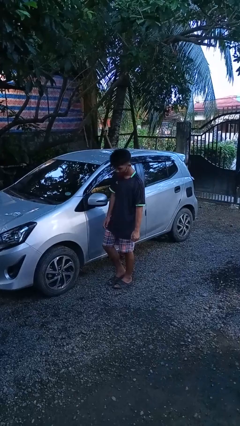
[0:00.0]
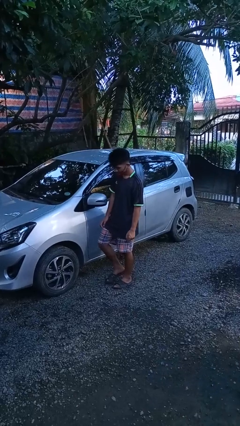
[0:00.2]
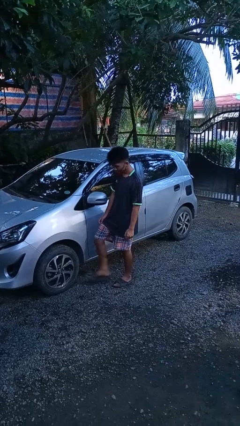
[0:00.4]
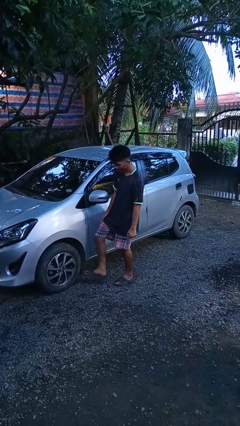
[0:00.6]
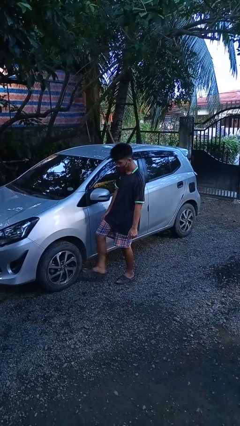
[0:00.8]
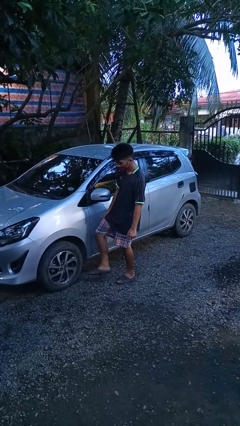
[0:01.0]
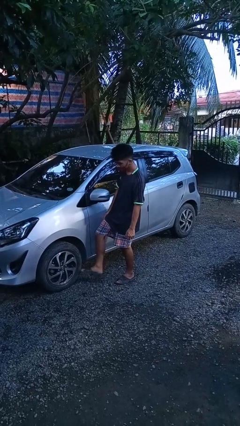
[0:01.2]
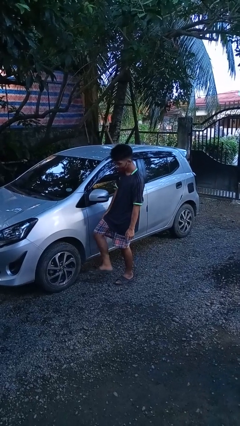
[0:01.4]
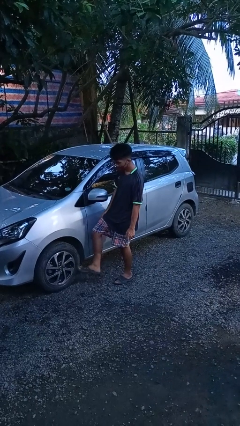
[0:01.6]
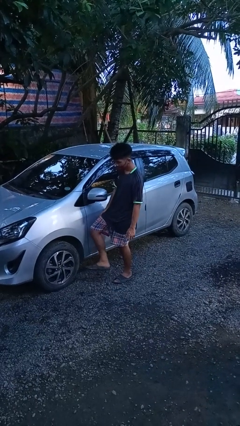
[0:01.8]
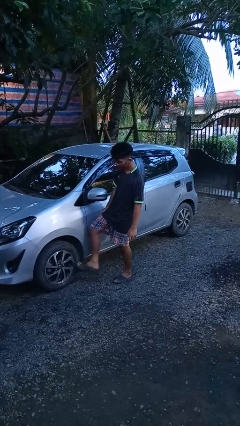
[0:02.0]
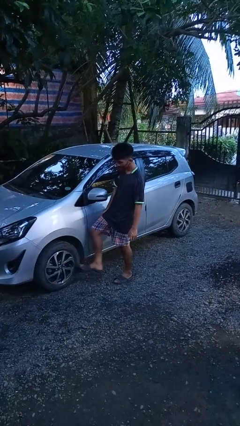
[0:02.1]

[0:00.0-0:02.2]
person kicks car tires

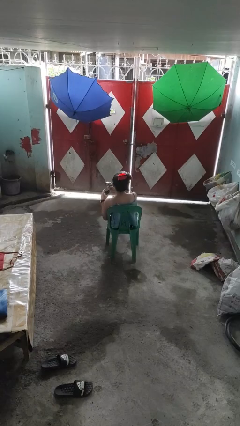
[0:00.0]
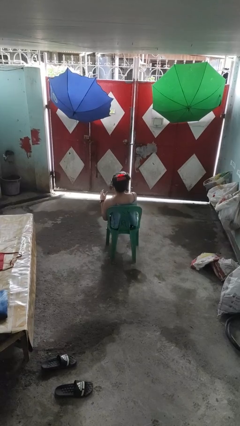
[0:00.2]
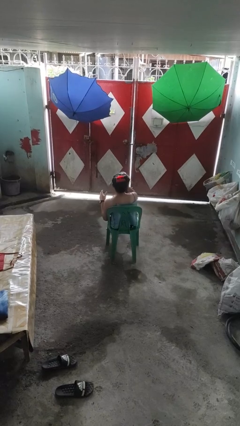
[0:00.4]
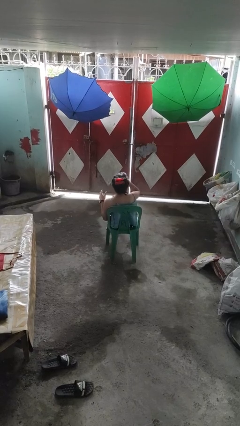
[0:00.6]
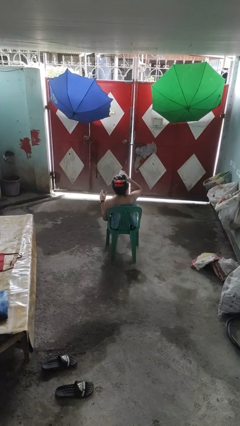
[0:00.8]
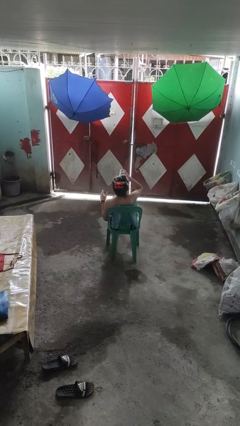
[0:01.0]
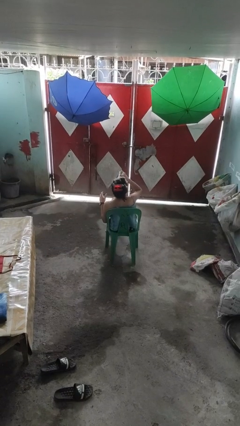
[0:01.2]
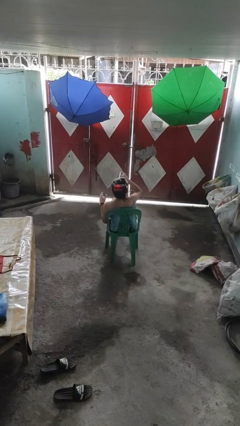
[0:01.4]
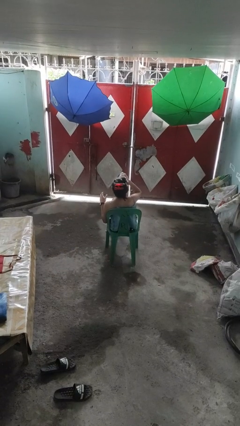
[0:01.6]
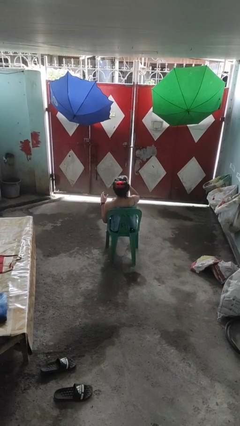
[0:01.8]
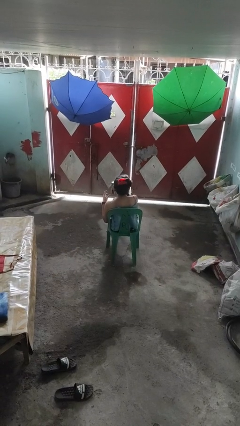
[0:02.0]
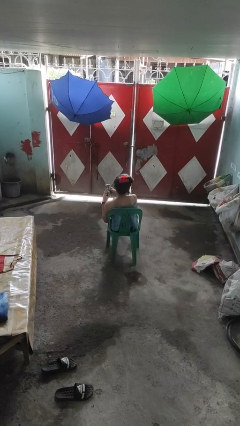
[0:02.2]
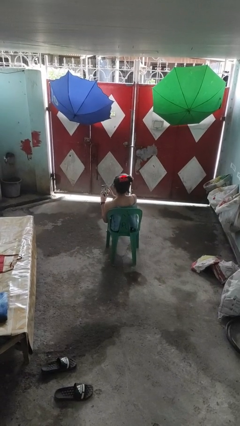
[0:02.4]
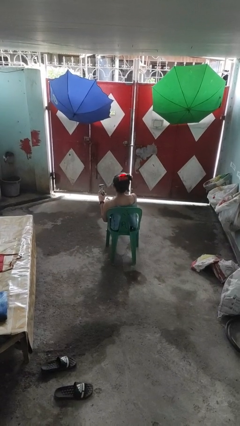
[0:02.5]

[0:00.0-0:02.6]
person drinks from beverage can

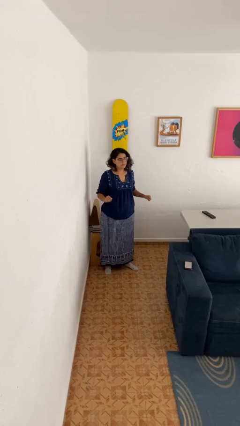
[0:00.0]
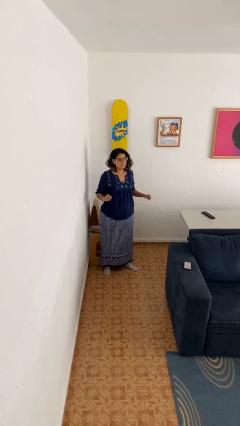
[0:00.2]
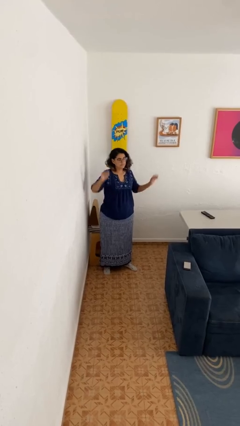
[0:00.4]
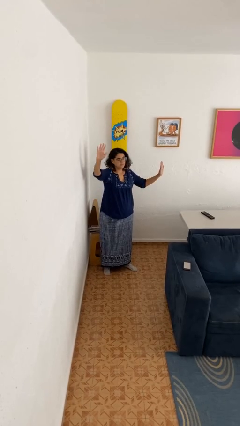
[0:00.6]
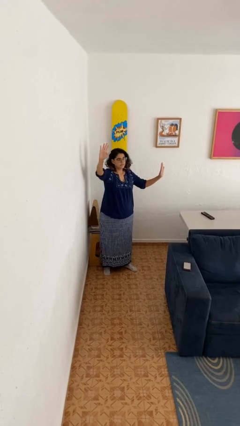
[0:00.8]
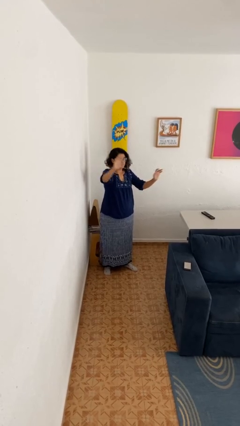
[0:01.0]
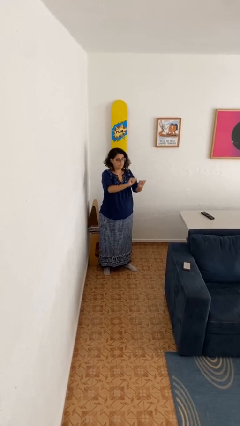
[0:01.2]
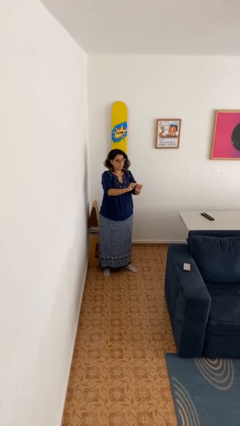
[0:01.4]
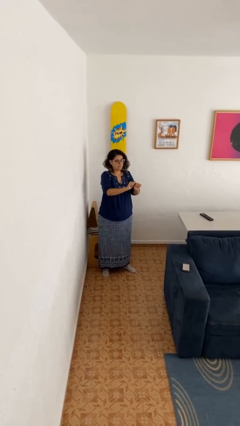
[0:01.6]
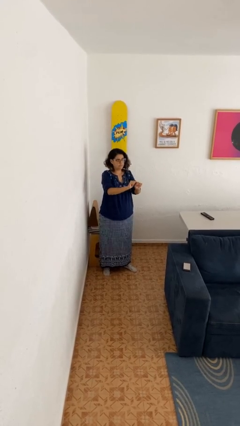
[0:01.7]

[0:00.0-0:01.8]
person gestures zoom out

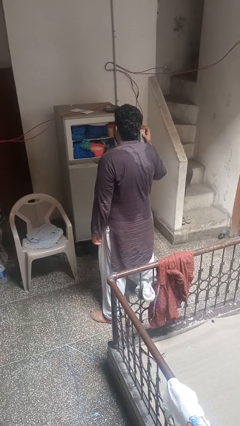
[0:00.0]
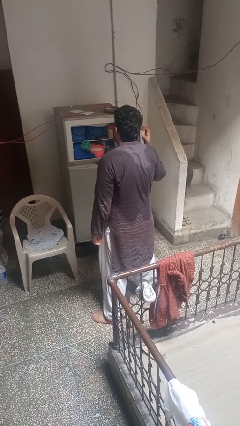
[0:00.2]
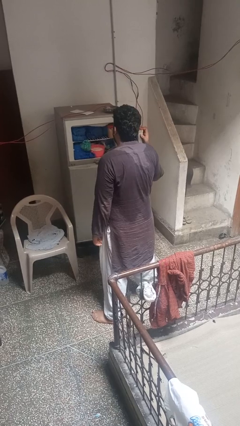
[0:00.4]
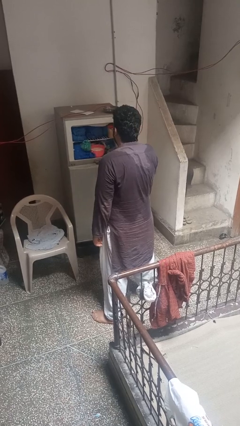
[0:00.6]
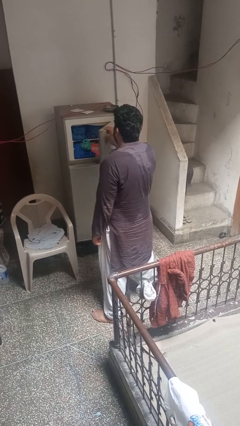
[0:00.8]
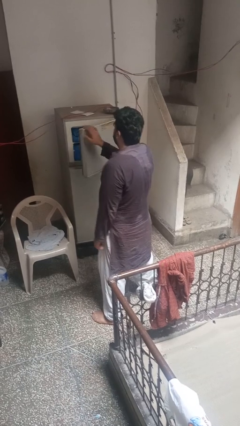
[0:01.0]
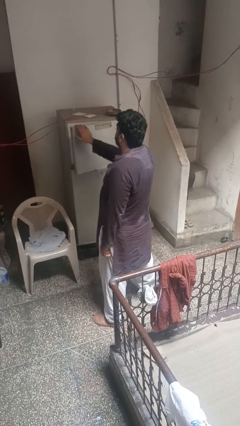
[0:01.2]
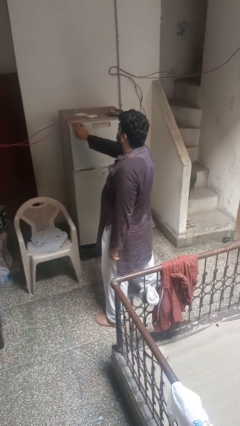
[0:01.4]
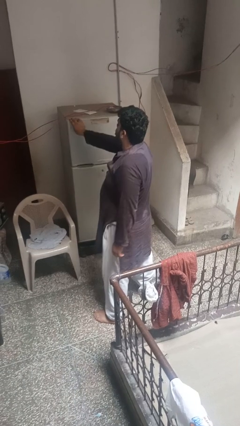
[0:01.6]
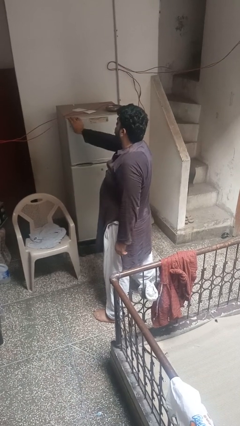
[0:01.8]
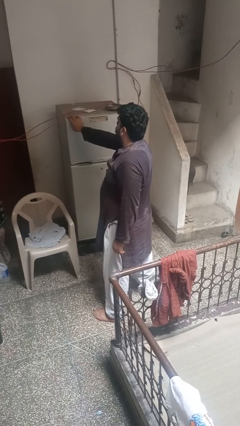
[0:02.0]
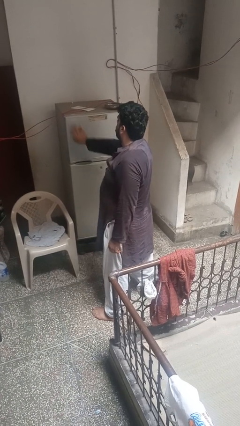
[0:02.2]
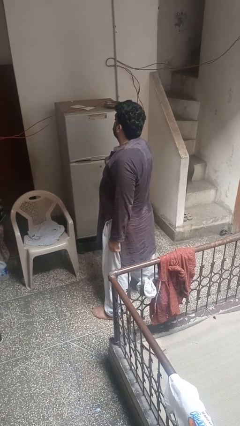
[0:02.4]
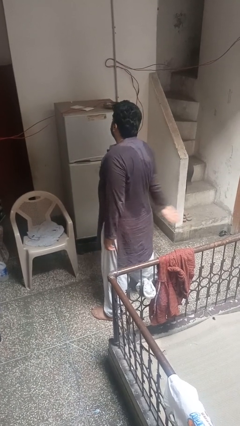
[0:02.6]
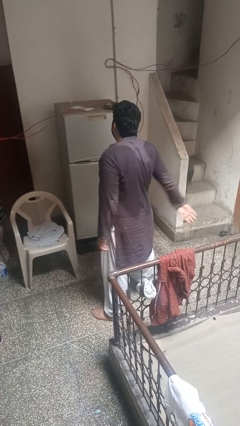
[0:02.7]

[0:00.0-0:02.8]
person closes refrigerator

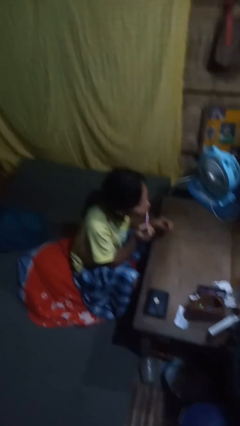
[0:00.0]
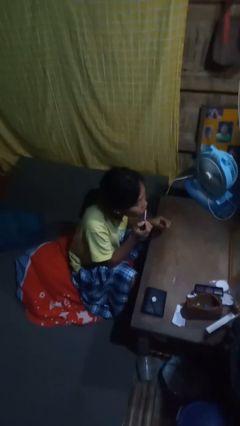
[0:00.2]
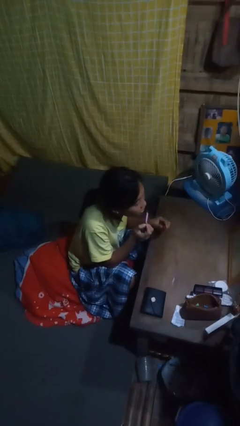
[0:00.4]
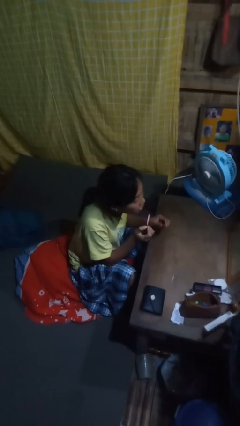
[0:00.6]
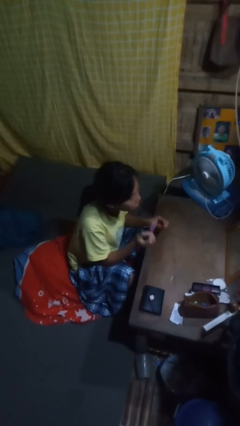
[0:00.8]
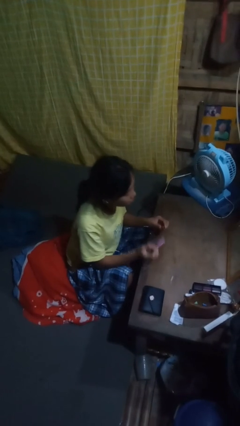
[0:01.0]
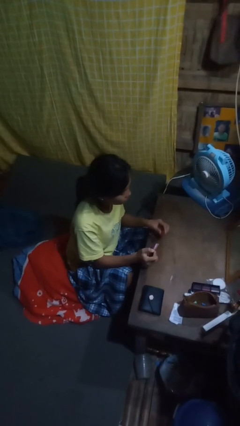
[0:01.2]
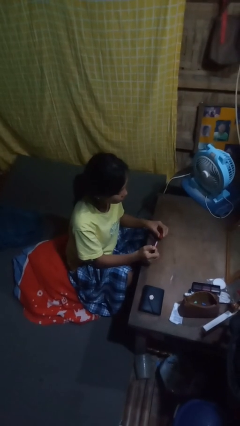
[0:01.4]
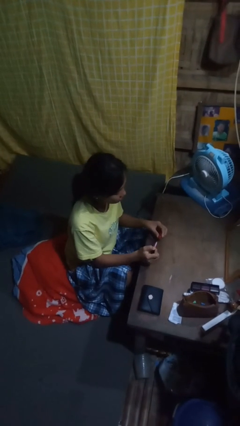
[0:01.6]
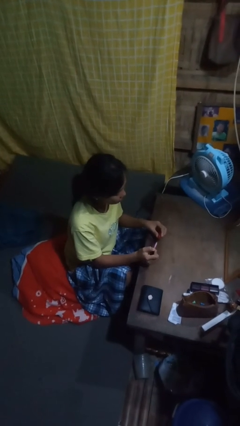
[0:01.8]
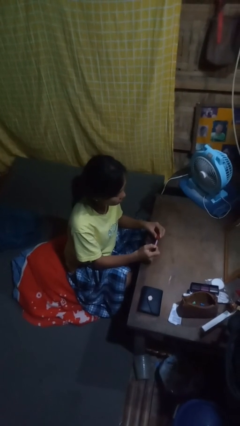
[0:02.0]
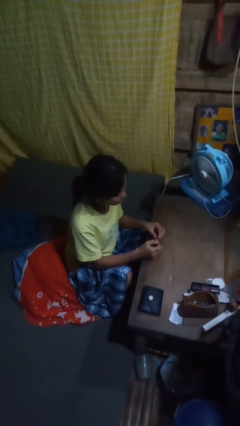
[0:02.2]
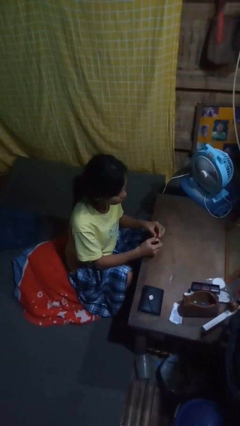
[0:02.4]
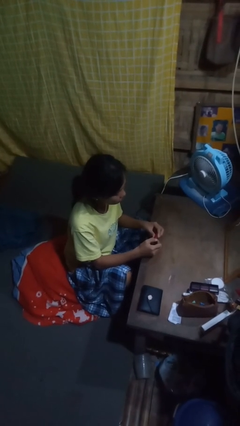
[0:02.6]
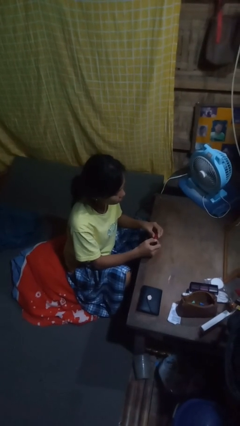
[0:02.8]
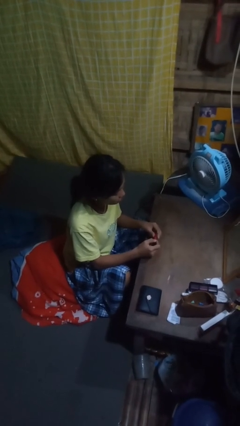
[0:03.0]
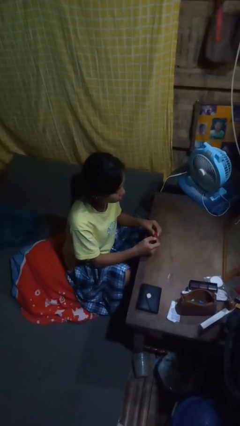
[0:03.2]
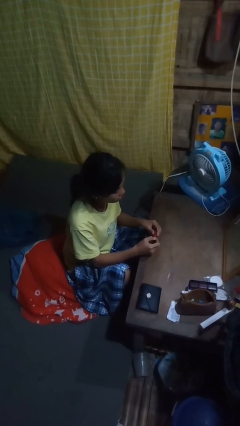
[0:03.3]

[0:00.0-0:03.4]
person applies lip makeup

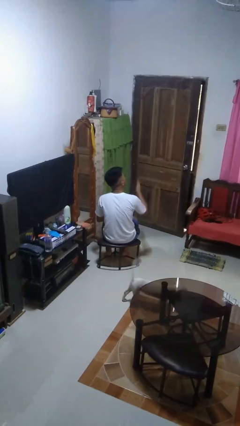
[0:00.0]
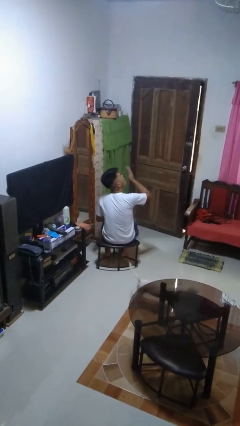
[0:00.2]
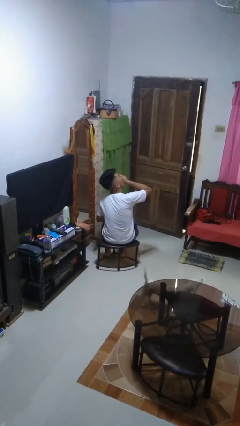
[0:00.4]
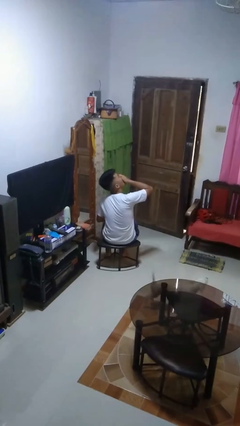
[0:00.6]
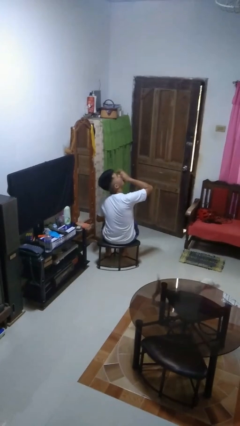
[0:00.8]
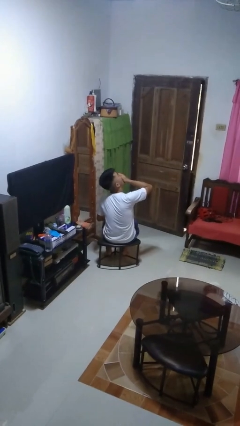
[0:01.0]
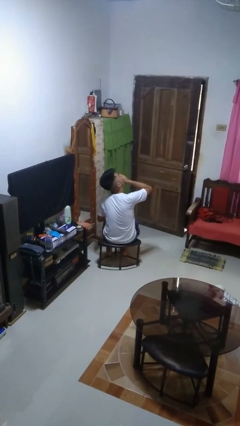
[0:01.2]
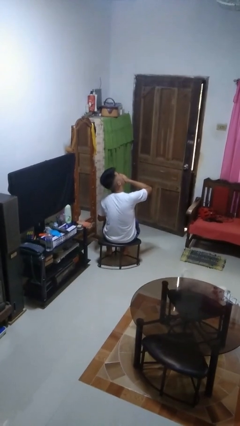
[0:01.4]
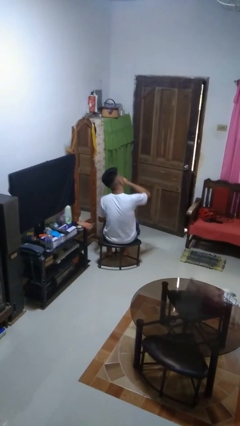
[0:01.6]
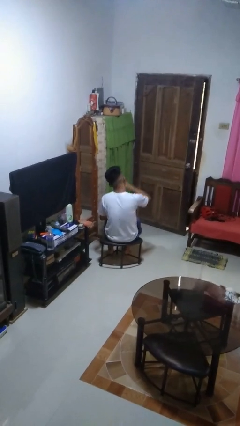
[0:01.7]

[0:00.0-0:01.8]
person yawns

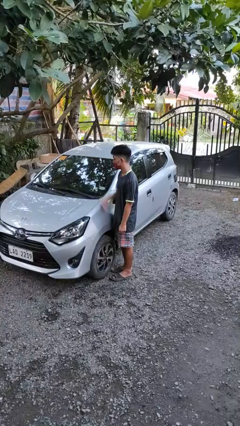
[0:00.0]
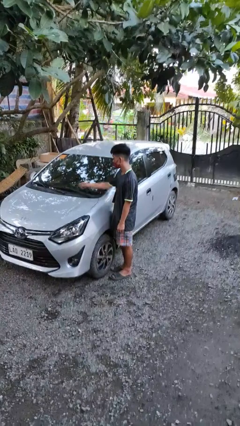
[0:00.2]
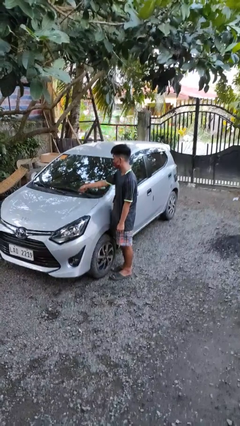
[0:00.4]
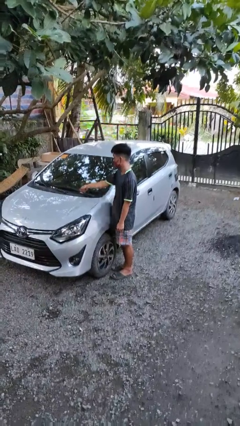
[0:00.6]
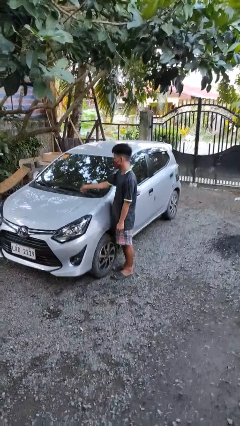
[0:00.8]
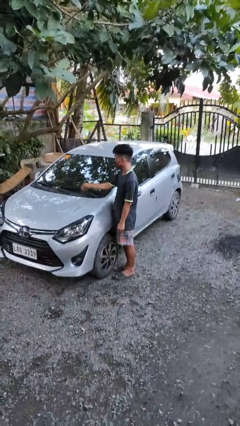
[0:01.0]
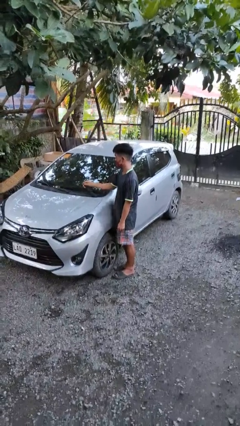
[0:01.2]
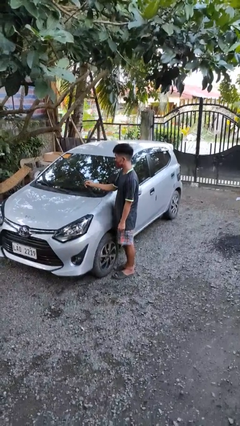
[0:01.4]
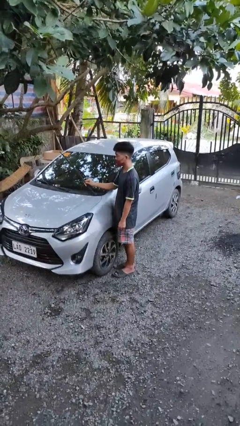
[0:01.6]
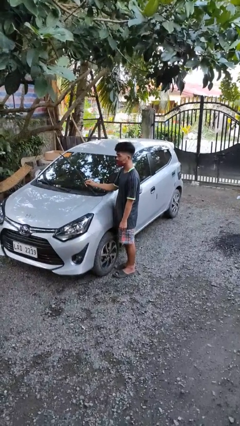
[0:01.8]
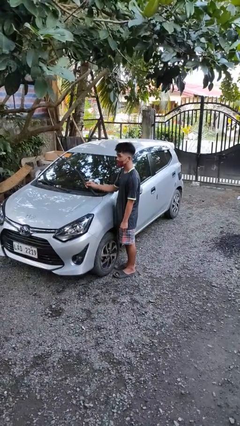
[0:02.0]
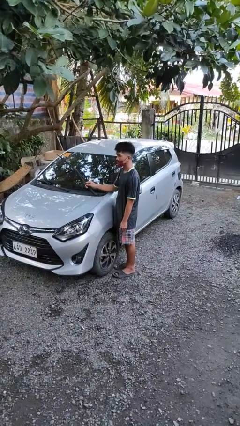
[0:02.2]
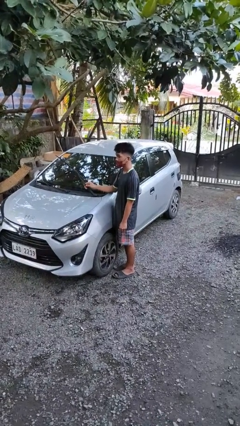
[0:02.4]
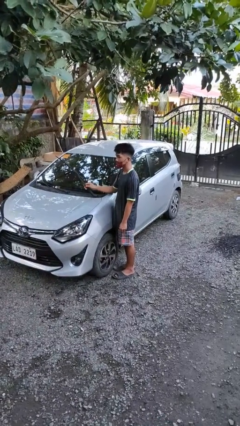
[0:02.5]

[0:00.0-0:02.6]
person flips up car wipers
